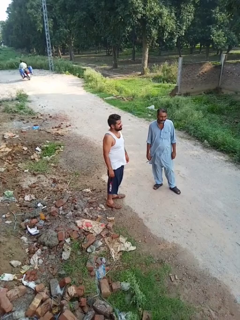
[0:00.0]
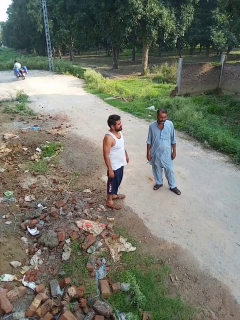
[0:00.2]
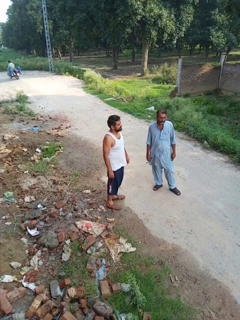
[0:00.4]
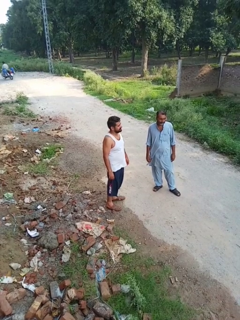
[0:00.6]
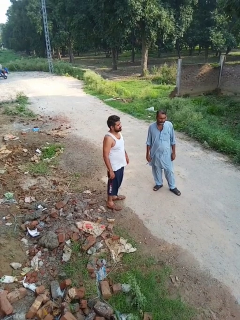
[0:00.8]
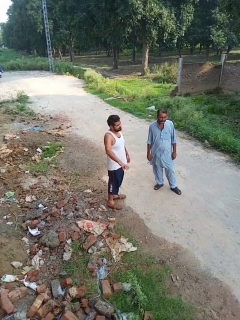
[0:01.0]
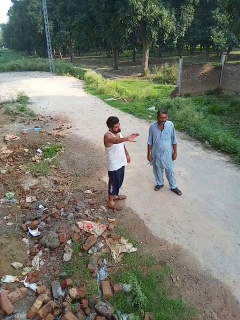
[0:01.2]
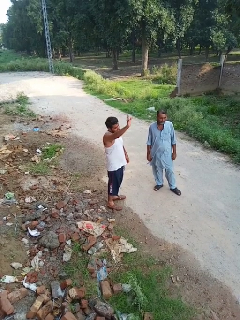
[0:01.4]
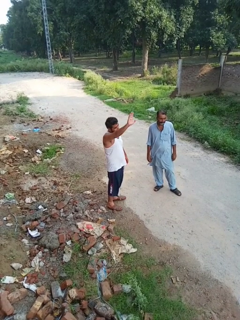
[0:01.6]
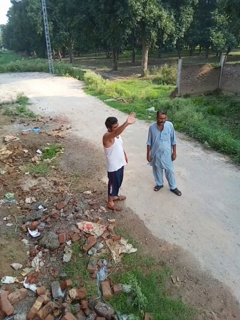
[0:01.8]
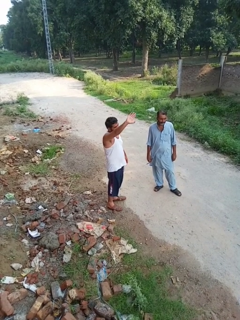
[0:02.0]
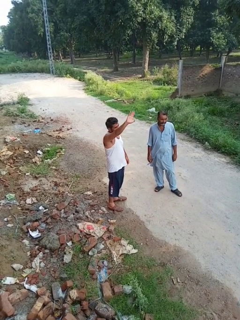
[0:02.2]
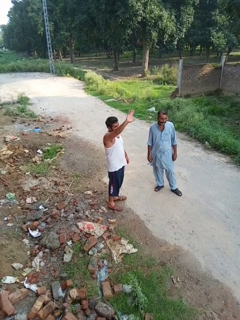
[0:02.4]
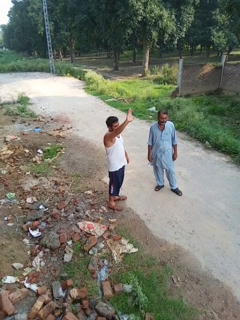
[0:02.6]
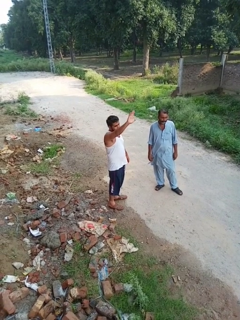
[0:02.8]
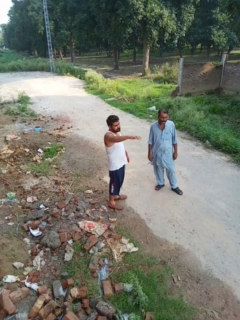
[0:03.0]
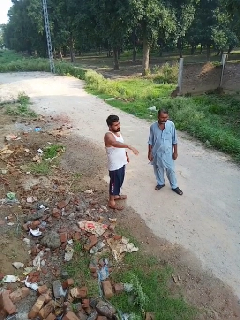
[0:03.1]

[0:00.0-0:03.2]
person waves at person

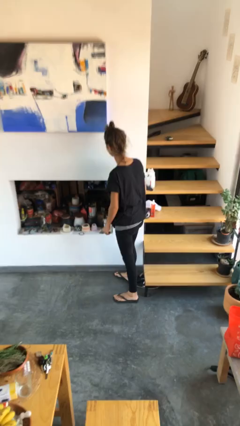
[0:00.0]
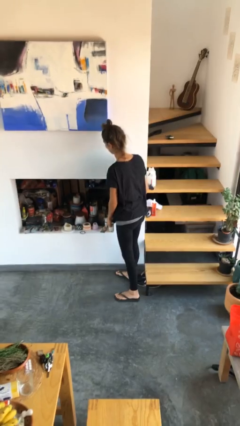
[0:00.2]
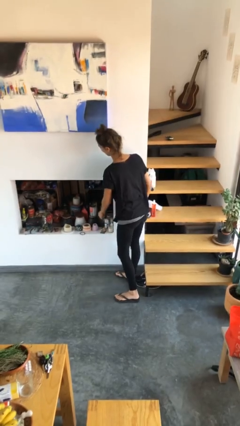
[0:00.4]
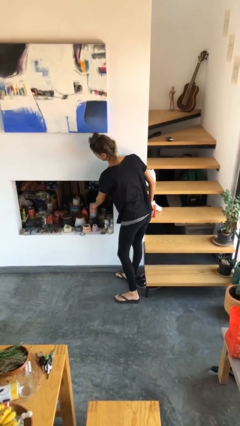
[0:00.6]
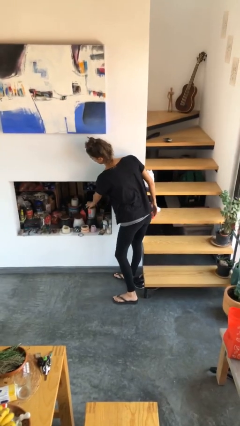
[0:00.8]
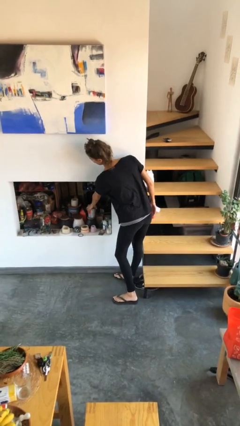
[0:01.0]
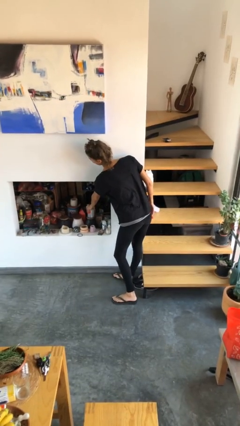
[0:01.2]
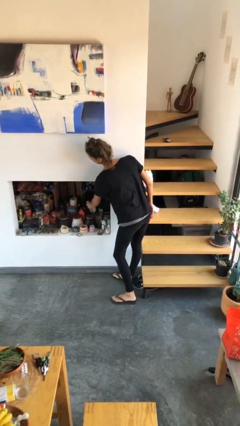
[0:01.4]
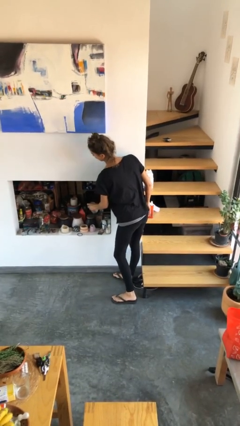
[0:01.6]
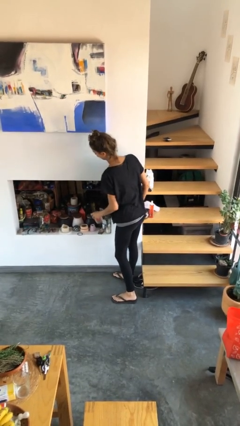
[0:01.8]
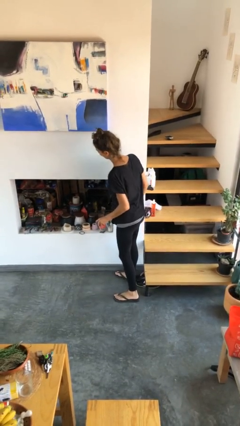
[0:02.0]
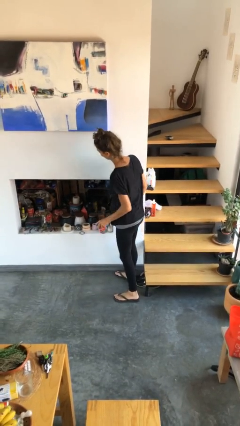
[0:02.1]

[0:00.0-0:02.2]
person picks up object from cabinet

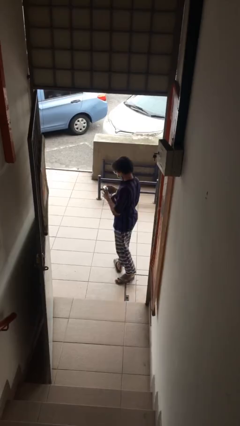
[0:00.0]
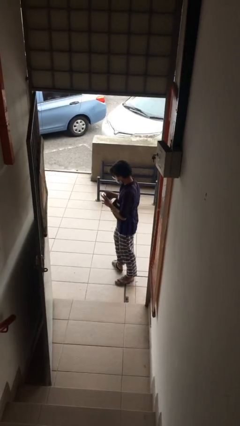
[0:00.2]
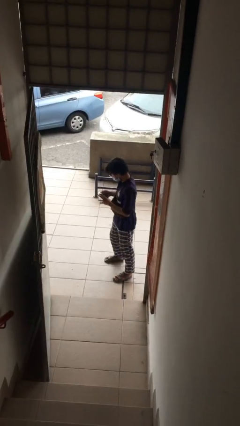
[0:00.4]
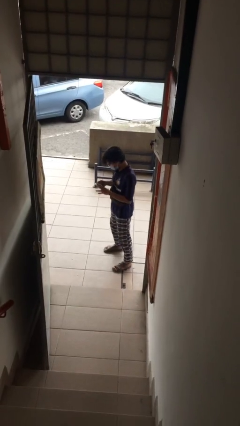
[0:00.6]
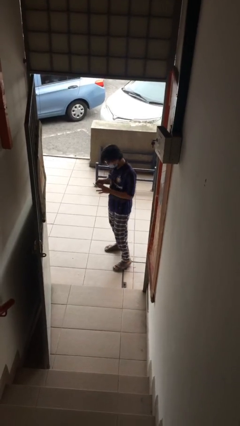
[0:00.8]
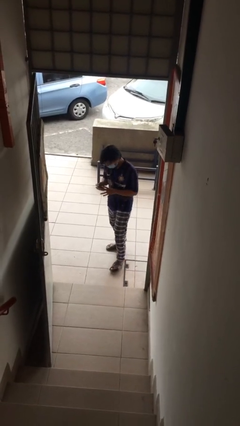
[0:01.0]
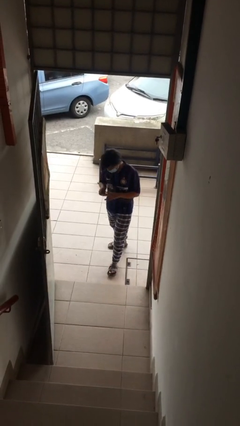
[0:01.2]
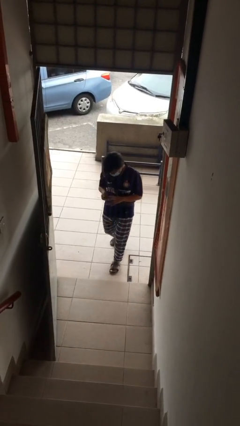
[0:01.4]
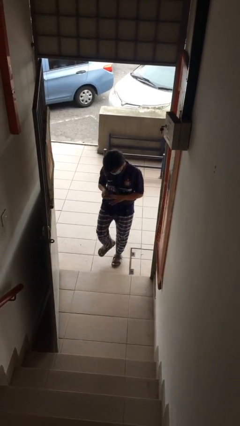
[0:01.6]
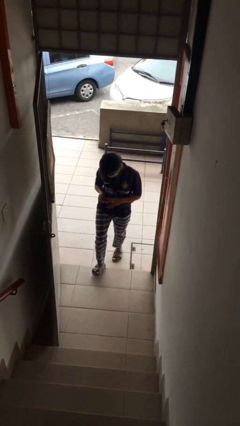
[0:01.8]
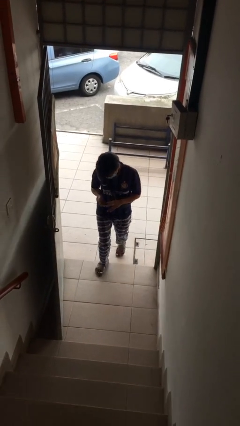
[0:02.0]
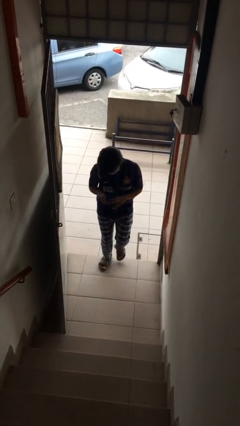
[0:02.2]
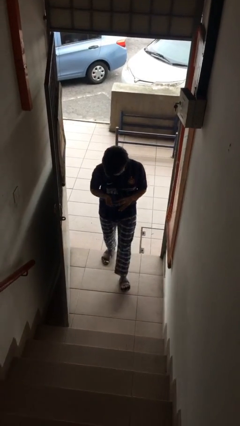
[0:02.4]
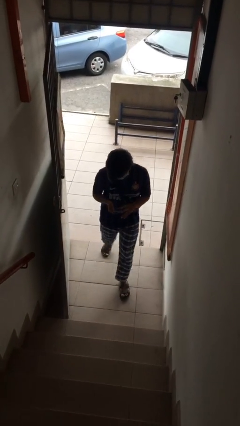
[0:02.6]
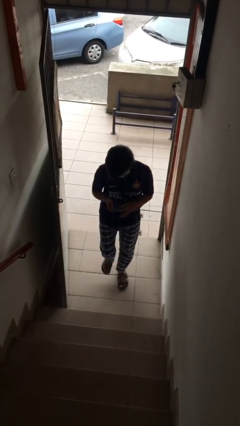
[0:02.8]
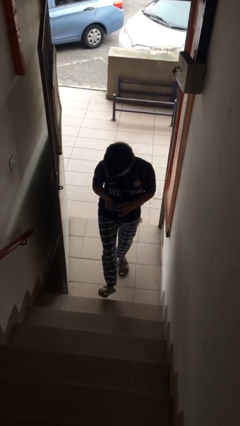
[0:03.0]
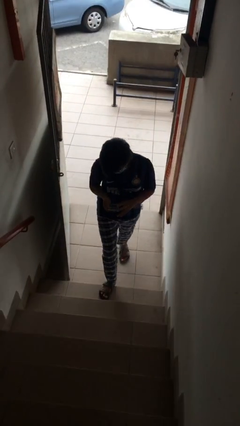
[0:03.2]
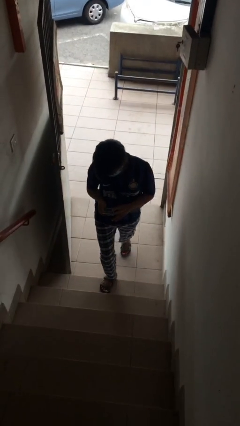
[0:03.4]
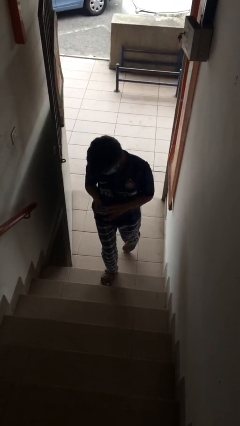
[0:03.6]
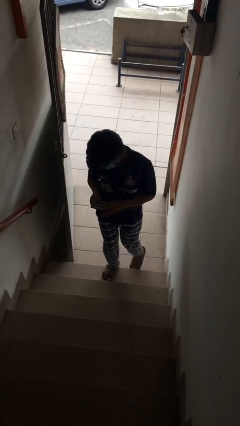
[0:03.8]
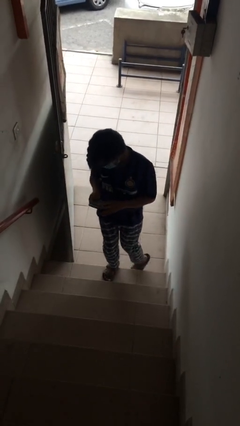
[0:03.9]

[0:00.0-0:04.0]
person enters scene through structure

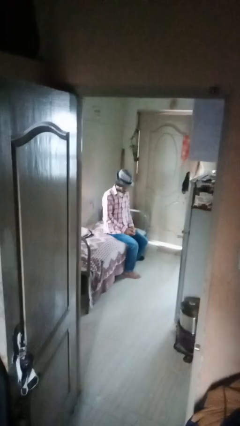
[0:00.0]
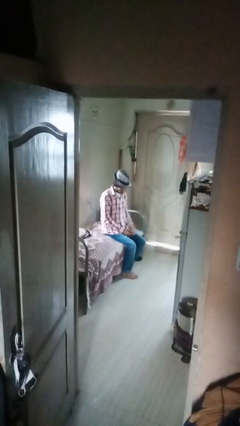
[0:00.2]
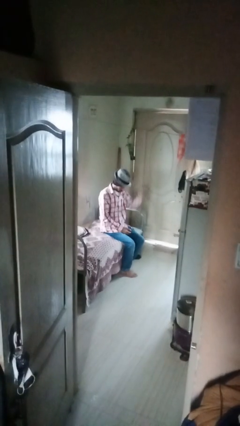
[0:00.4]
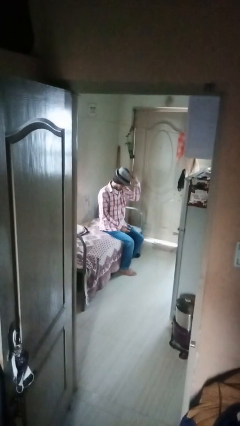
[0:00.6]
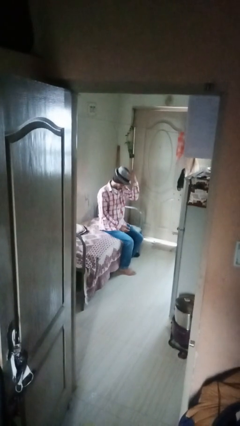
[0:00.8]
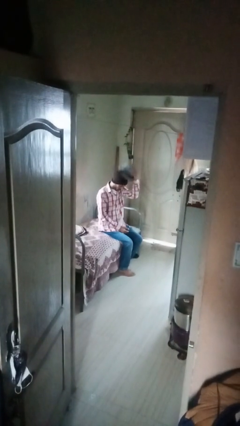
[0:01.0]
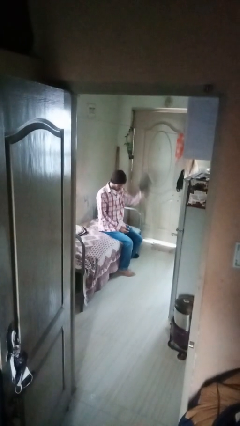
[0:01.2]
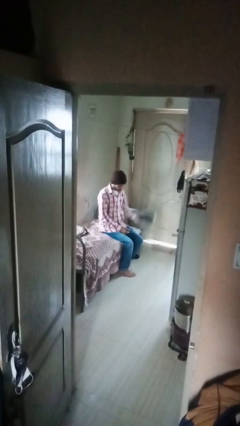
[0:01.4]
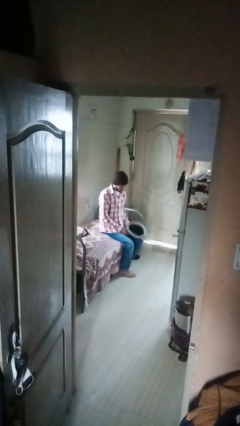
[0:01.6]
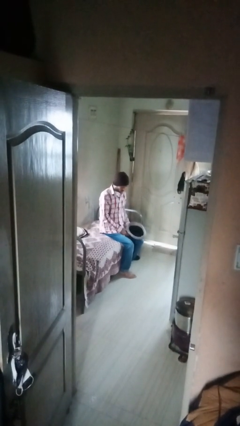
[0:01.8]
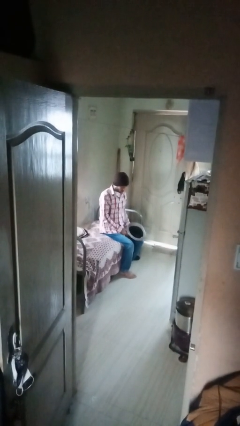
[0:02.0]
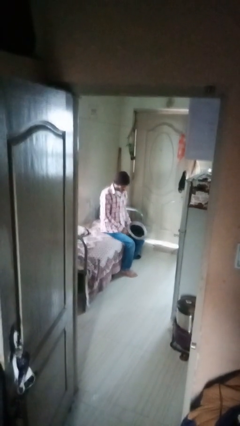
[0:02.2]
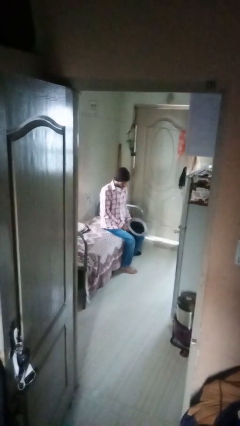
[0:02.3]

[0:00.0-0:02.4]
person takes off hat

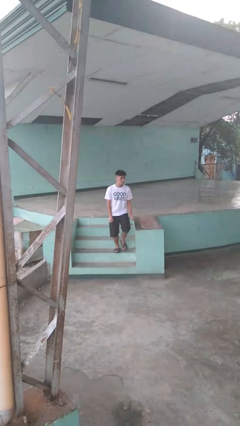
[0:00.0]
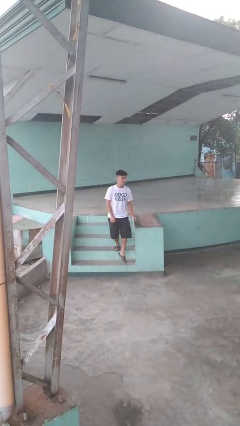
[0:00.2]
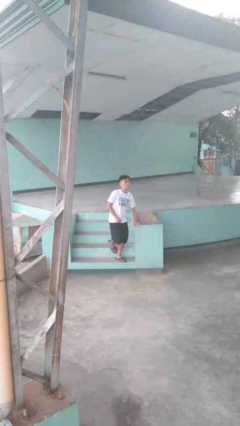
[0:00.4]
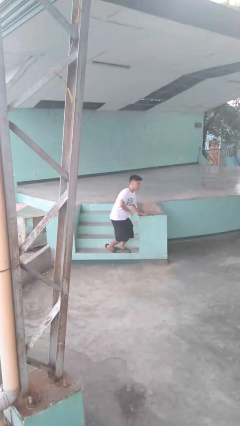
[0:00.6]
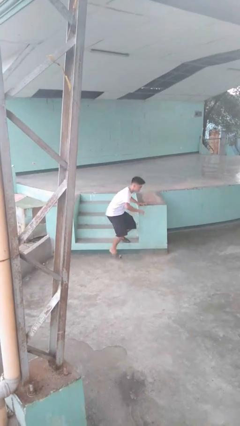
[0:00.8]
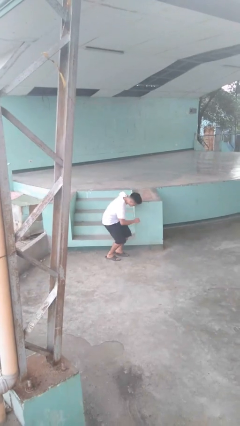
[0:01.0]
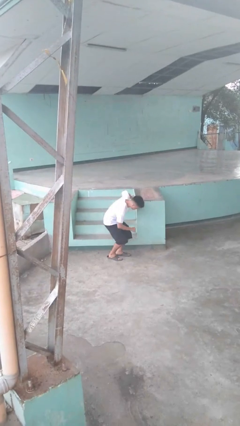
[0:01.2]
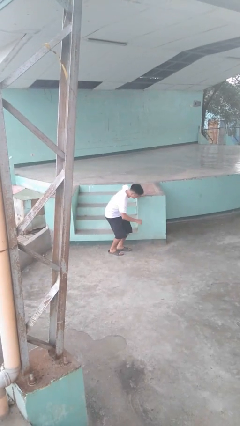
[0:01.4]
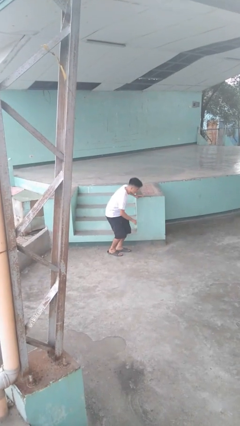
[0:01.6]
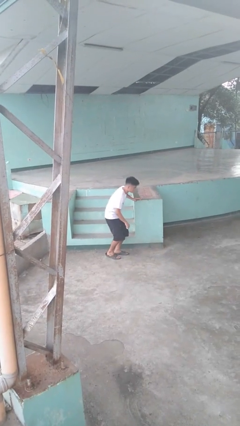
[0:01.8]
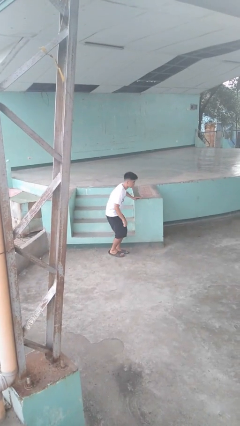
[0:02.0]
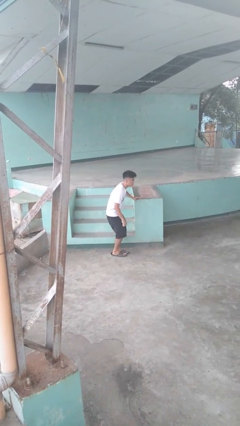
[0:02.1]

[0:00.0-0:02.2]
person trips on stair

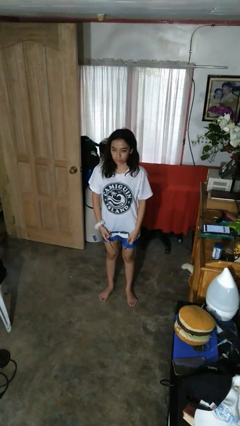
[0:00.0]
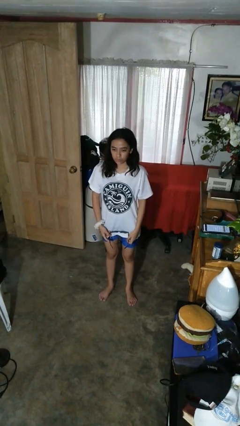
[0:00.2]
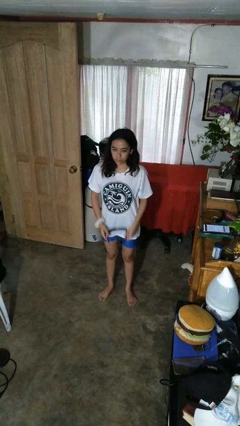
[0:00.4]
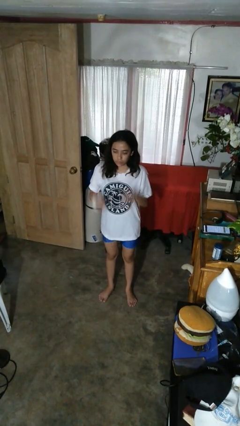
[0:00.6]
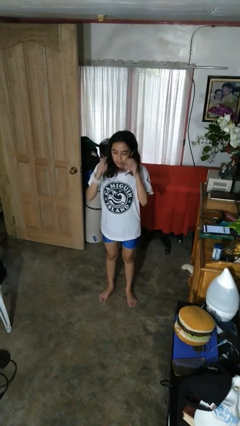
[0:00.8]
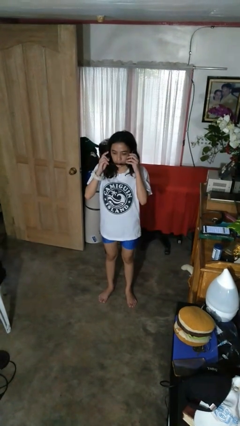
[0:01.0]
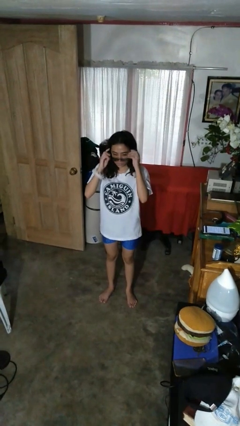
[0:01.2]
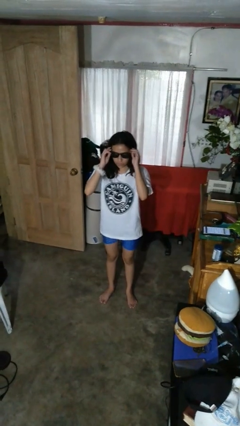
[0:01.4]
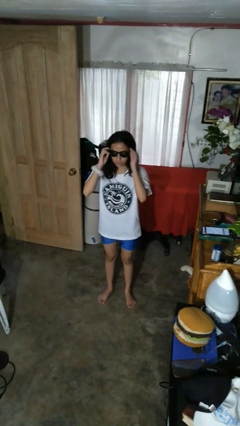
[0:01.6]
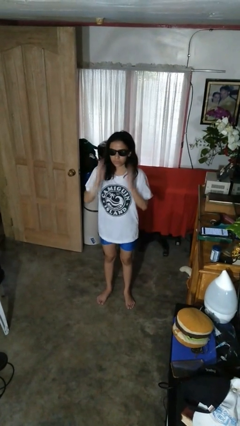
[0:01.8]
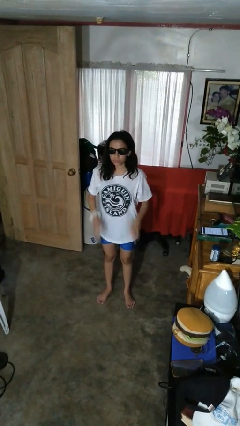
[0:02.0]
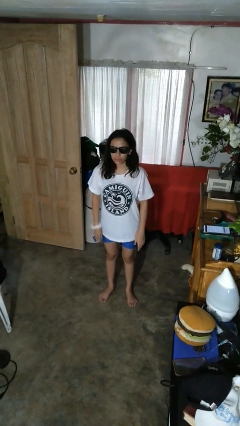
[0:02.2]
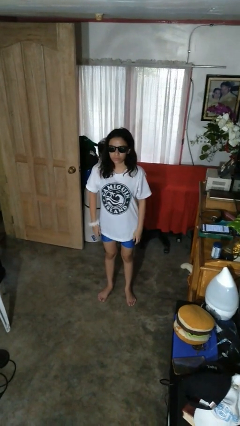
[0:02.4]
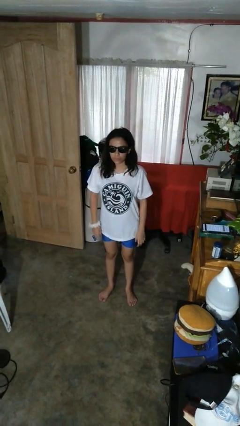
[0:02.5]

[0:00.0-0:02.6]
person puts on sunglasses

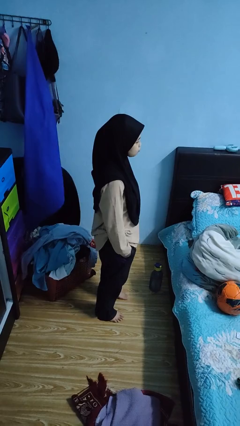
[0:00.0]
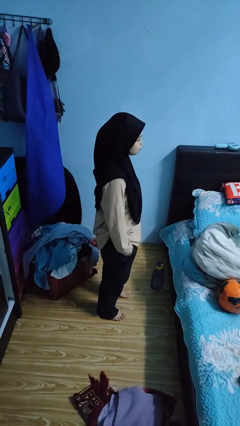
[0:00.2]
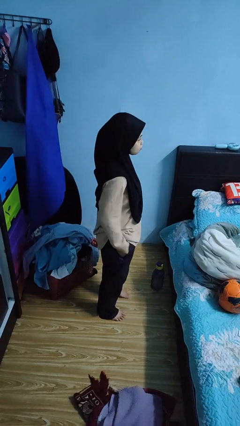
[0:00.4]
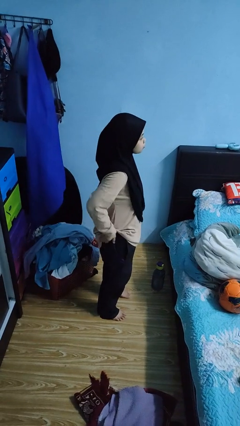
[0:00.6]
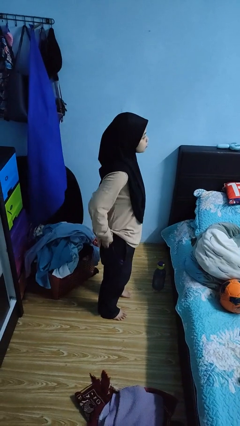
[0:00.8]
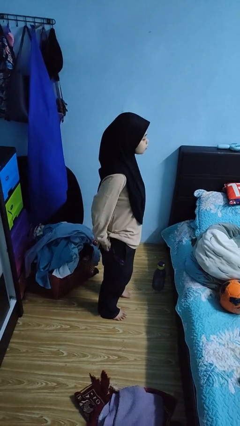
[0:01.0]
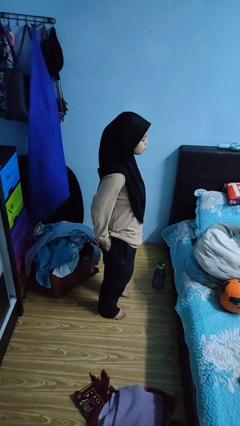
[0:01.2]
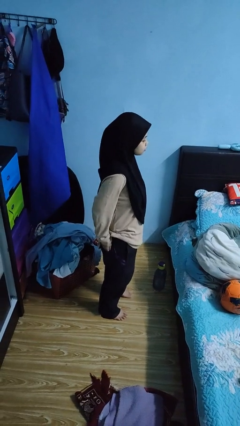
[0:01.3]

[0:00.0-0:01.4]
person puts hands in back pockets
